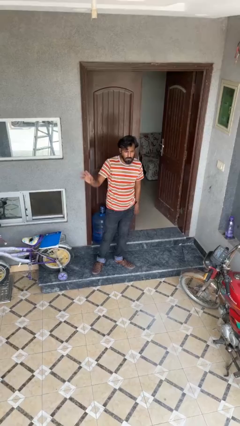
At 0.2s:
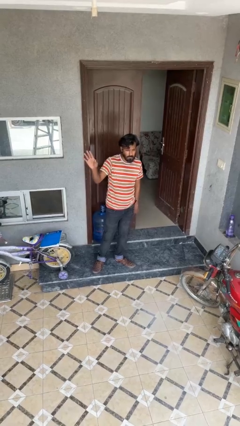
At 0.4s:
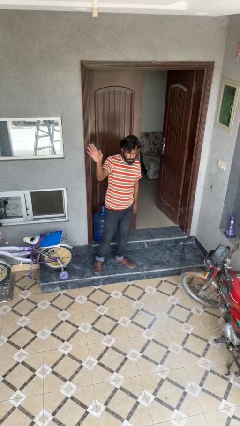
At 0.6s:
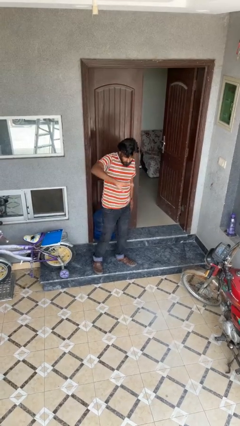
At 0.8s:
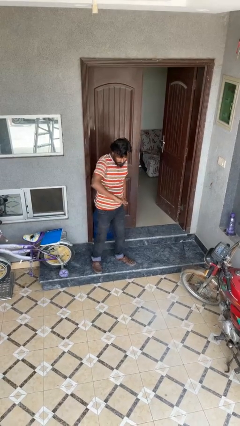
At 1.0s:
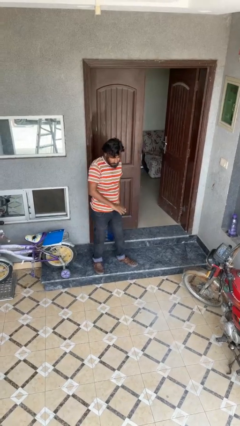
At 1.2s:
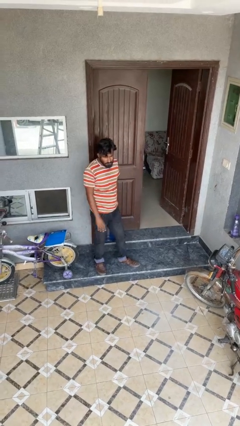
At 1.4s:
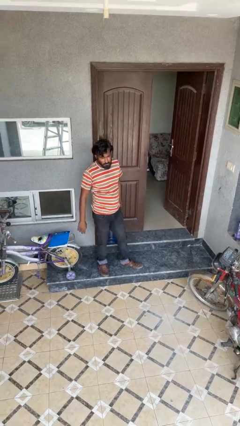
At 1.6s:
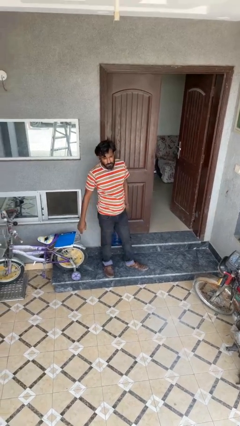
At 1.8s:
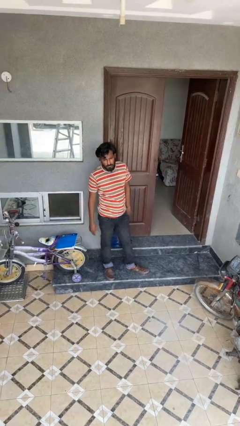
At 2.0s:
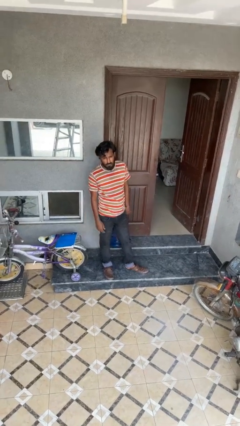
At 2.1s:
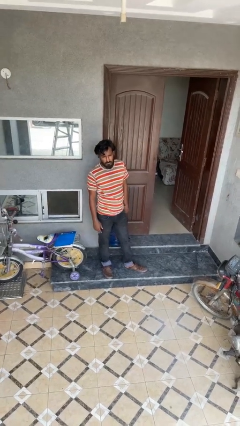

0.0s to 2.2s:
person gestures swipe down

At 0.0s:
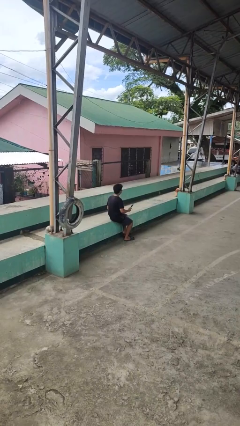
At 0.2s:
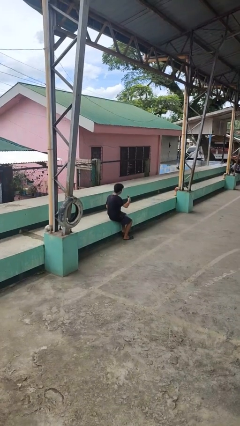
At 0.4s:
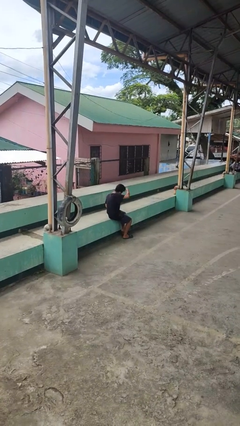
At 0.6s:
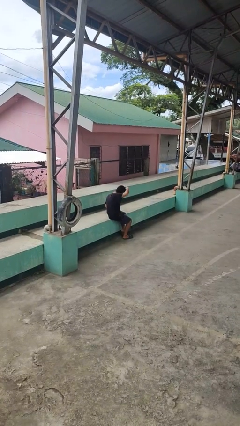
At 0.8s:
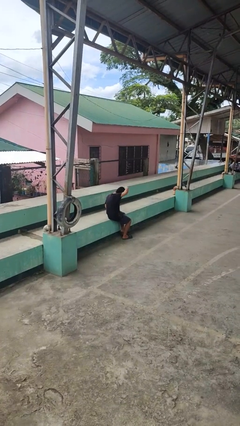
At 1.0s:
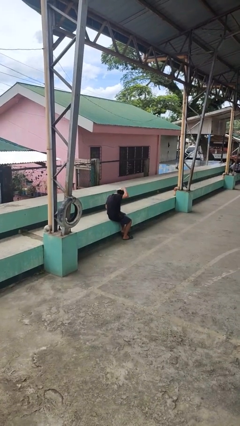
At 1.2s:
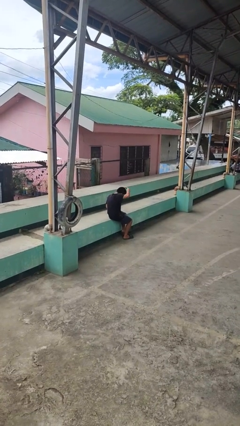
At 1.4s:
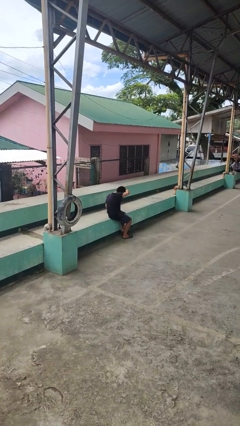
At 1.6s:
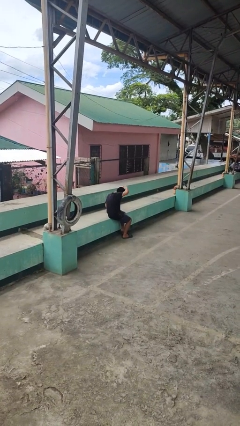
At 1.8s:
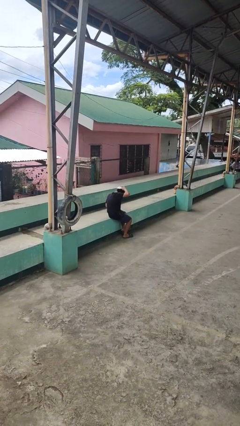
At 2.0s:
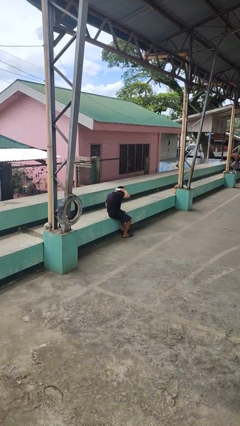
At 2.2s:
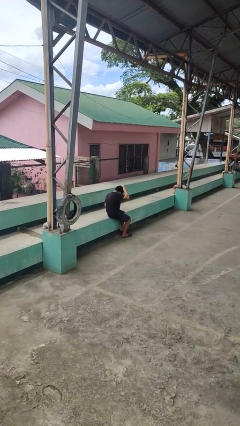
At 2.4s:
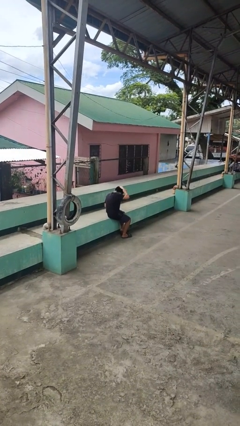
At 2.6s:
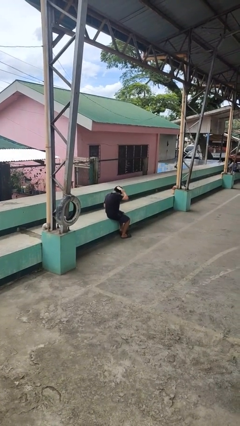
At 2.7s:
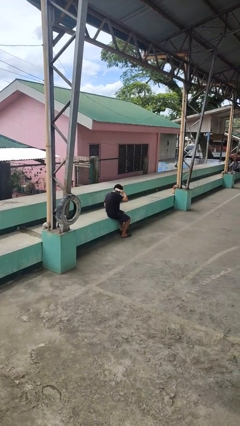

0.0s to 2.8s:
person brushes hair

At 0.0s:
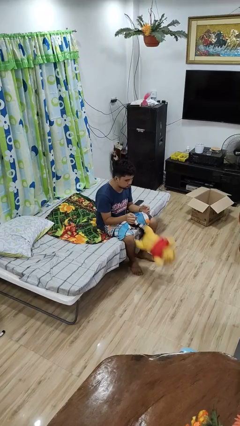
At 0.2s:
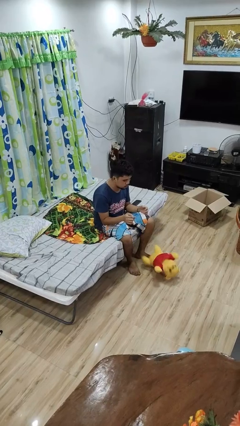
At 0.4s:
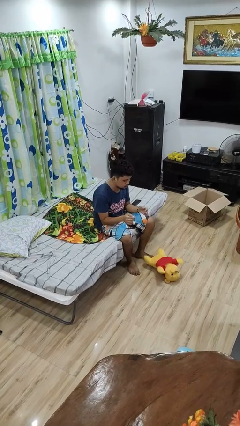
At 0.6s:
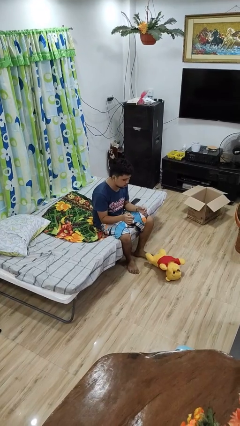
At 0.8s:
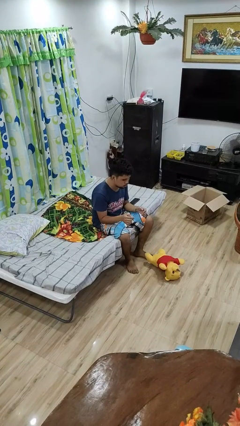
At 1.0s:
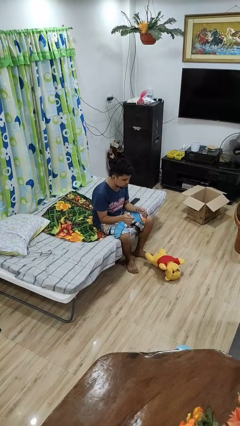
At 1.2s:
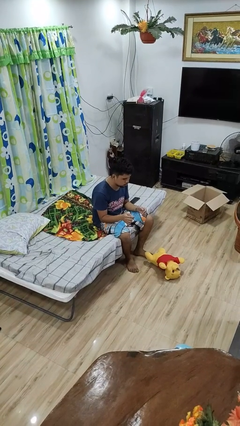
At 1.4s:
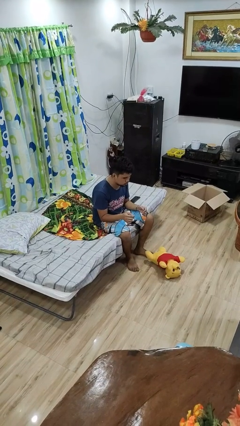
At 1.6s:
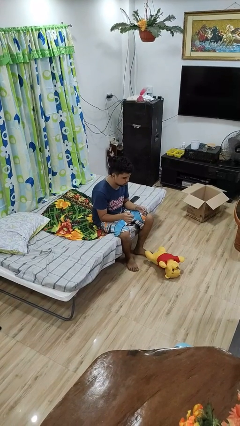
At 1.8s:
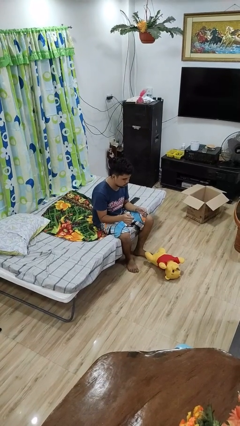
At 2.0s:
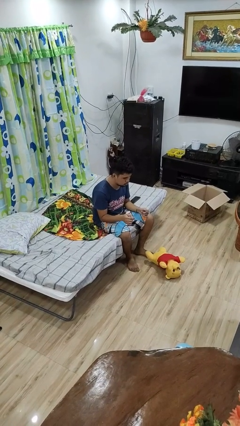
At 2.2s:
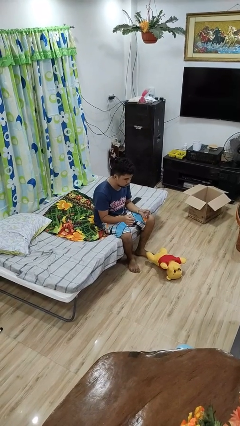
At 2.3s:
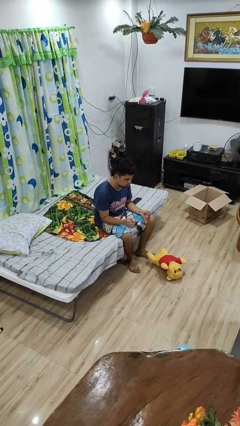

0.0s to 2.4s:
person drops object

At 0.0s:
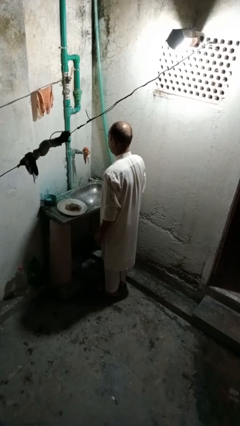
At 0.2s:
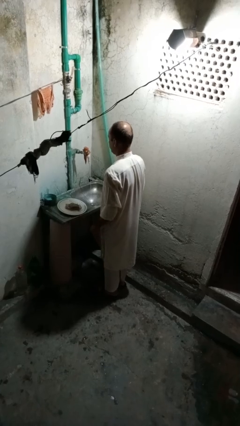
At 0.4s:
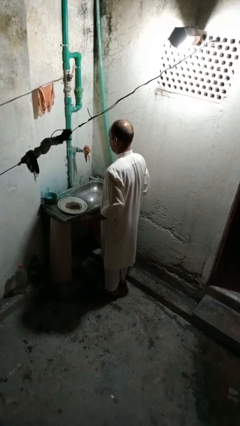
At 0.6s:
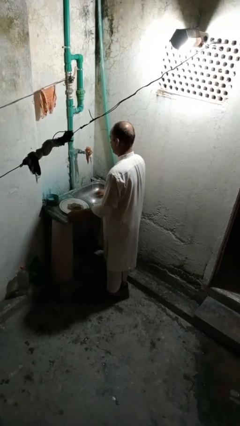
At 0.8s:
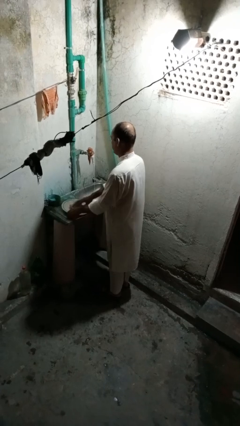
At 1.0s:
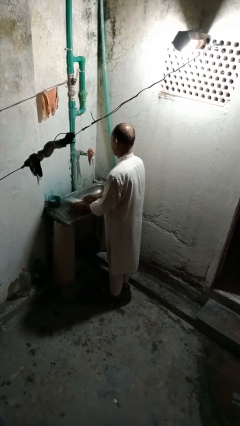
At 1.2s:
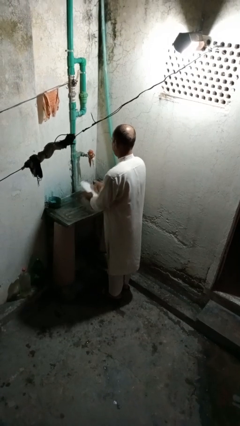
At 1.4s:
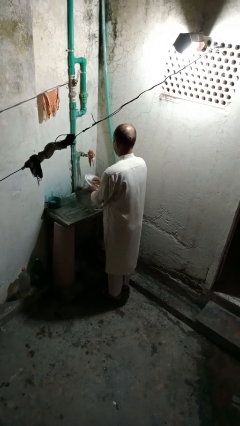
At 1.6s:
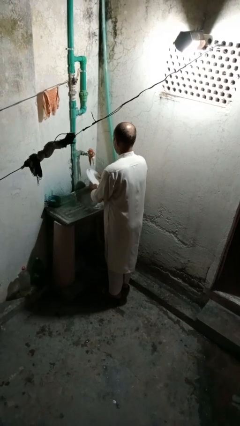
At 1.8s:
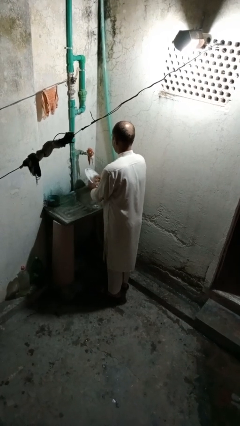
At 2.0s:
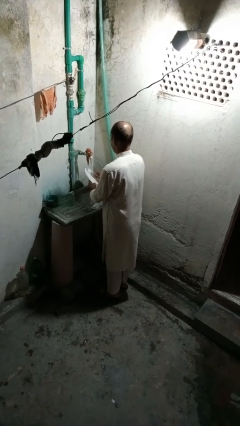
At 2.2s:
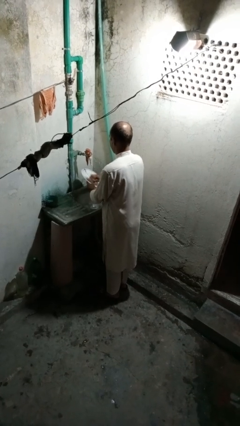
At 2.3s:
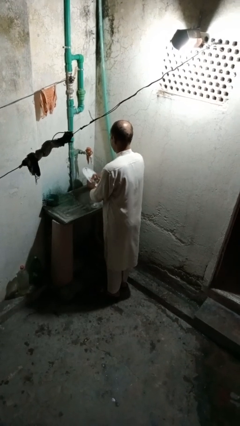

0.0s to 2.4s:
person washes dish

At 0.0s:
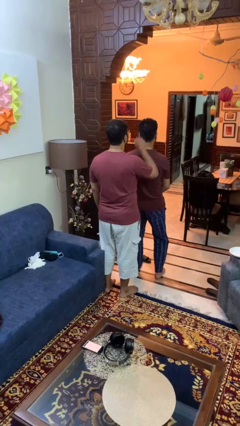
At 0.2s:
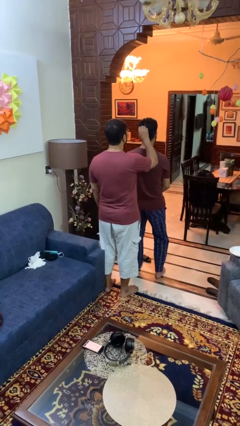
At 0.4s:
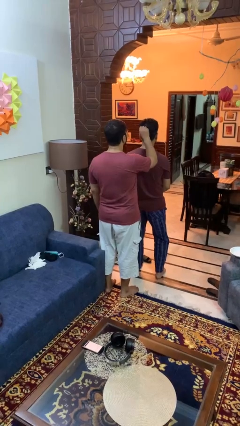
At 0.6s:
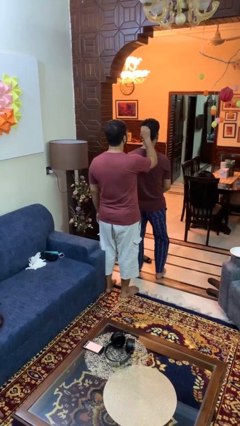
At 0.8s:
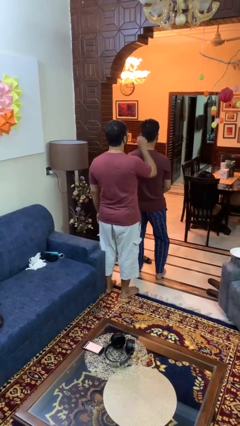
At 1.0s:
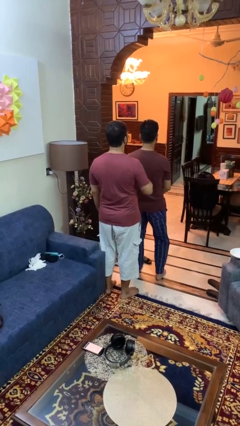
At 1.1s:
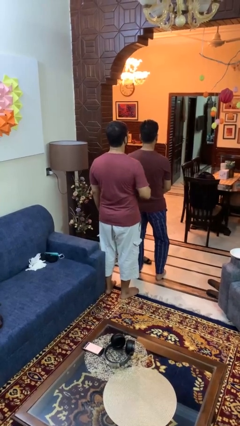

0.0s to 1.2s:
person grabs person by hair

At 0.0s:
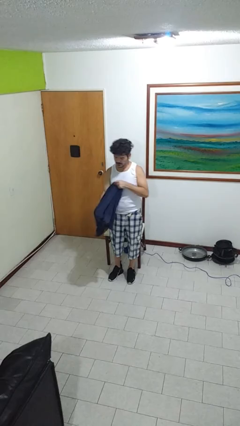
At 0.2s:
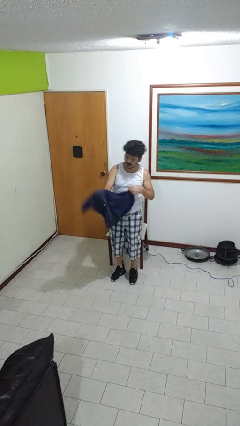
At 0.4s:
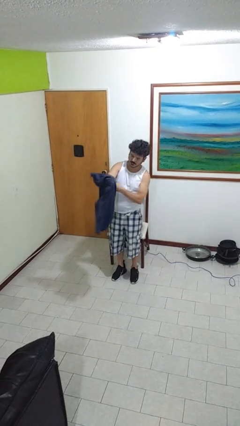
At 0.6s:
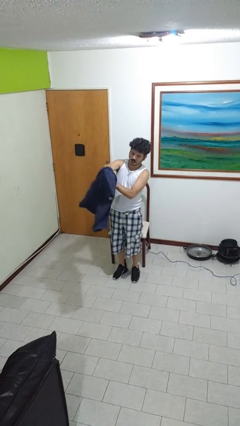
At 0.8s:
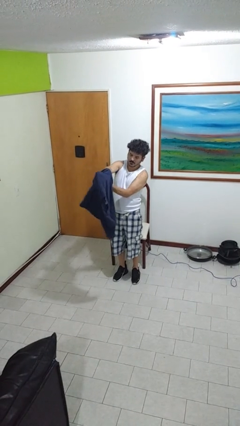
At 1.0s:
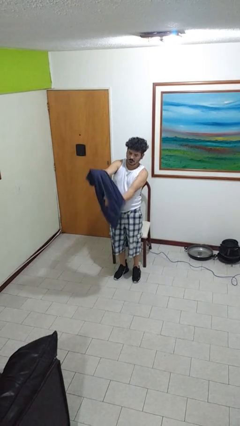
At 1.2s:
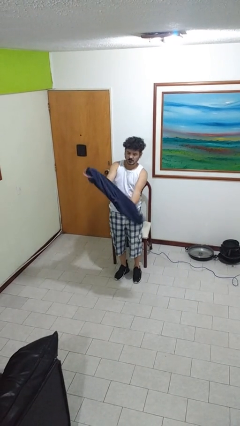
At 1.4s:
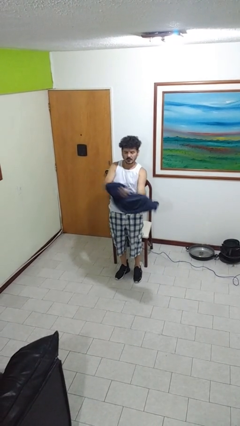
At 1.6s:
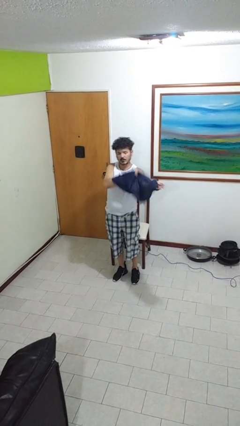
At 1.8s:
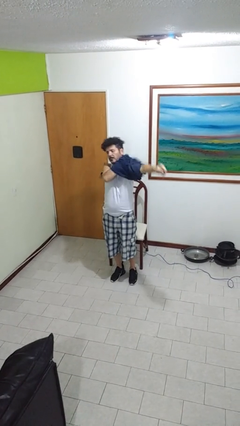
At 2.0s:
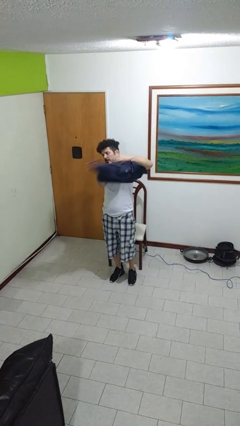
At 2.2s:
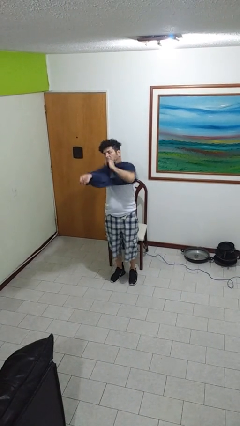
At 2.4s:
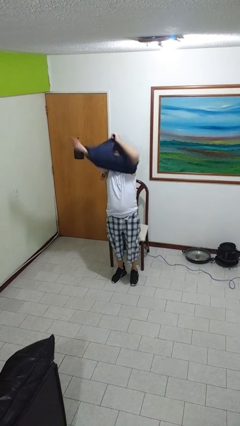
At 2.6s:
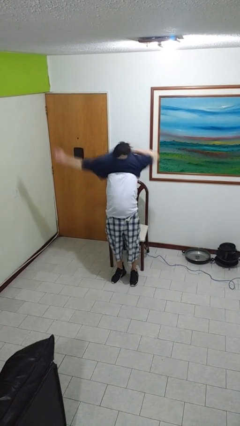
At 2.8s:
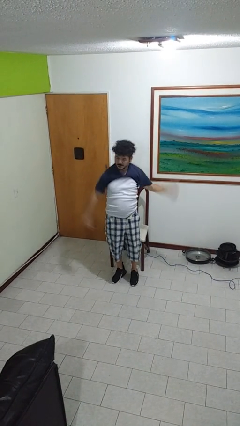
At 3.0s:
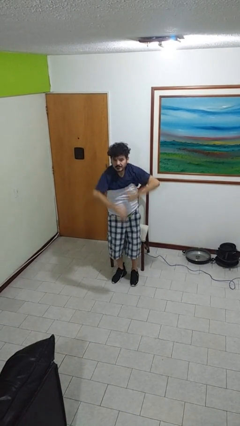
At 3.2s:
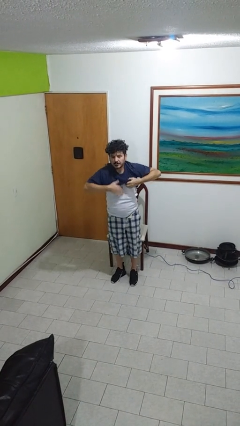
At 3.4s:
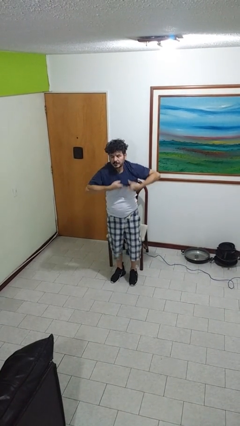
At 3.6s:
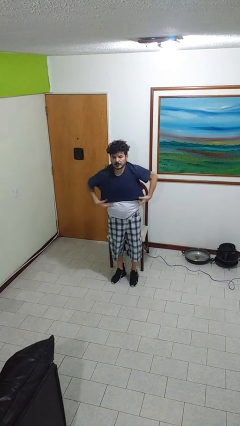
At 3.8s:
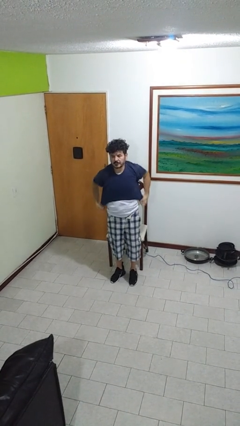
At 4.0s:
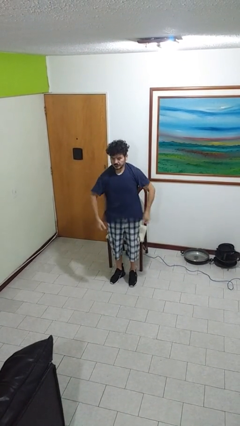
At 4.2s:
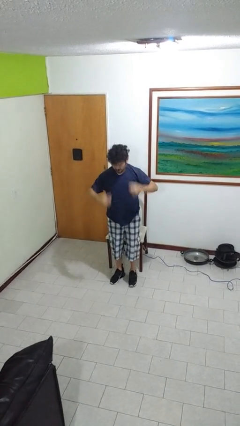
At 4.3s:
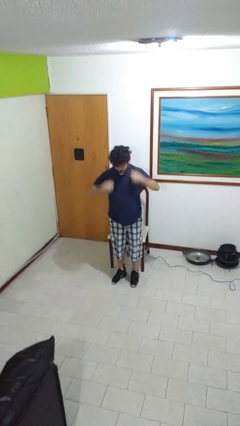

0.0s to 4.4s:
person puts on shirt

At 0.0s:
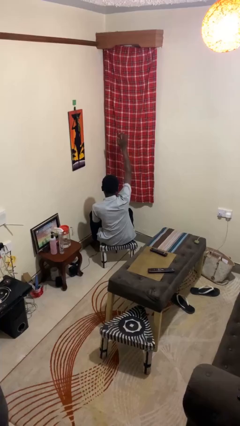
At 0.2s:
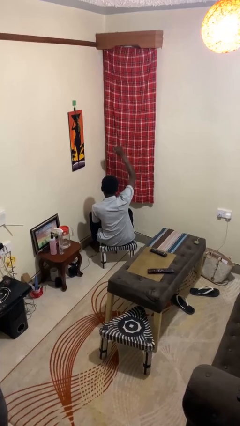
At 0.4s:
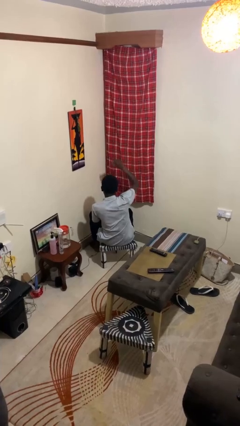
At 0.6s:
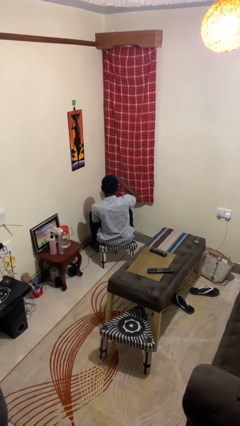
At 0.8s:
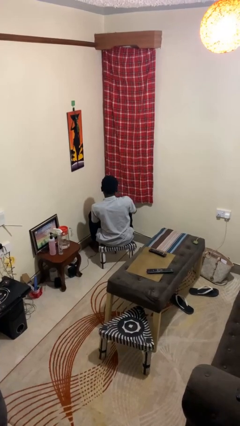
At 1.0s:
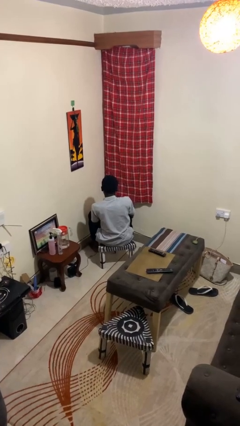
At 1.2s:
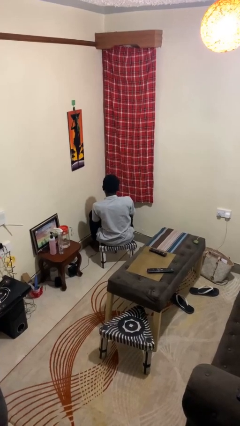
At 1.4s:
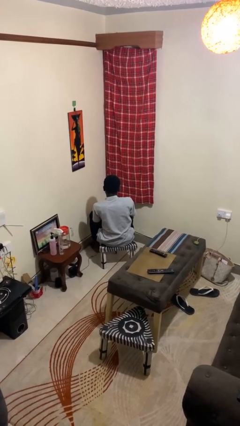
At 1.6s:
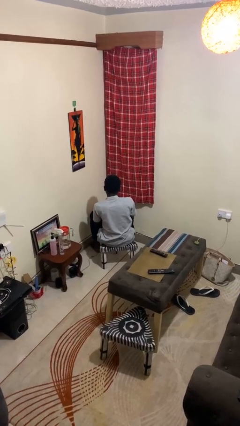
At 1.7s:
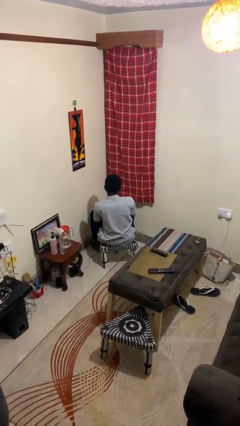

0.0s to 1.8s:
person gestures lower hand
